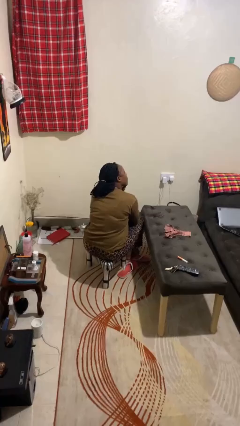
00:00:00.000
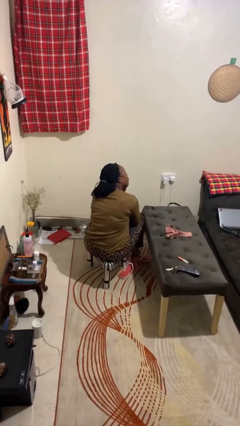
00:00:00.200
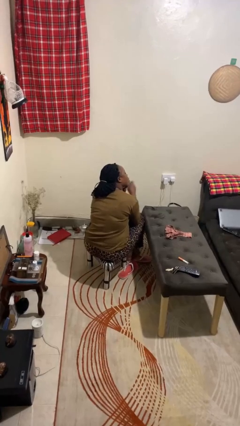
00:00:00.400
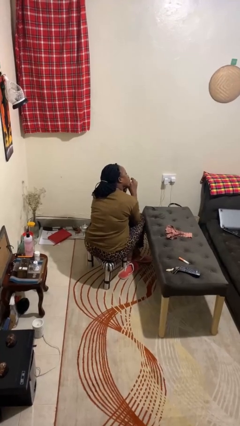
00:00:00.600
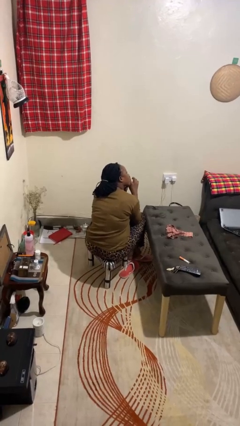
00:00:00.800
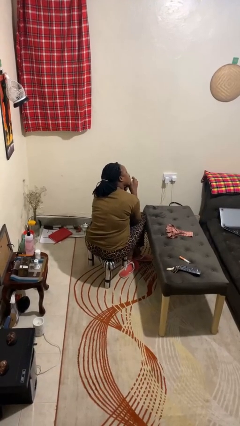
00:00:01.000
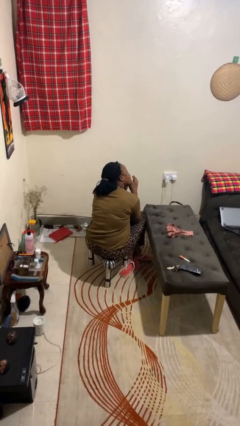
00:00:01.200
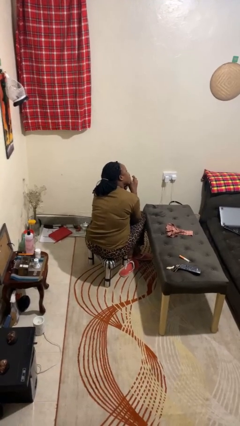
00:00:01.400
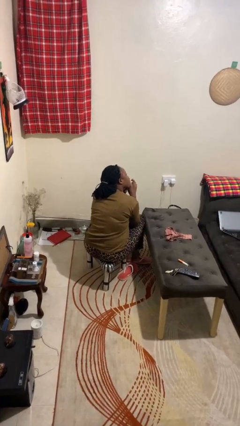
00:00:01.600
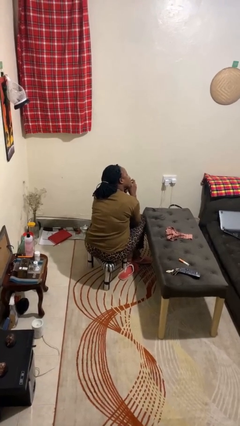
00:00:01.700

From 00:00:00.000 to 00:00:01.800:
person gestures be quiet

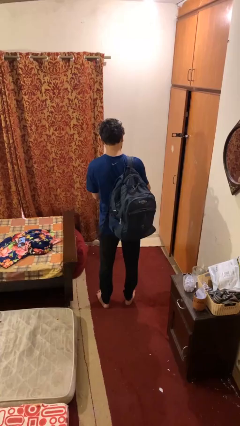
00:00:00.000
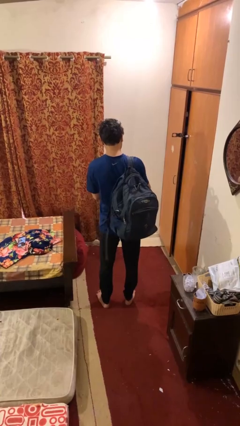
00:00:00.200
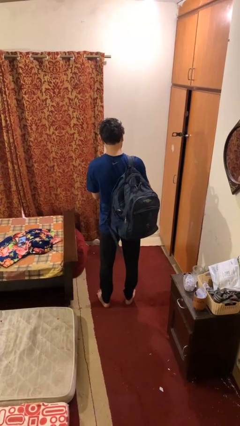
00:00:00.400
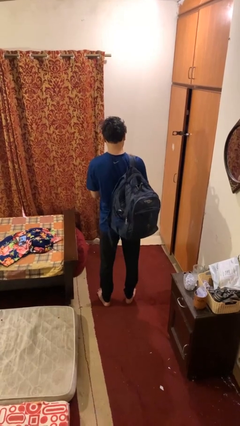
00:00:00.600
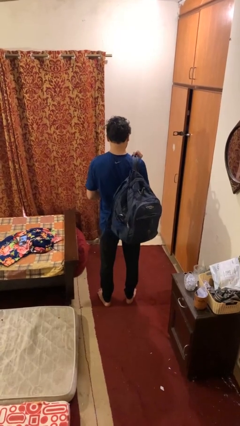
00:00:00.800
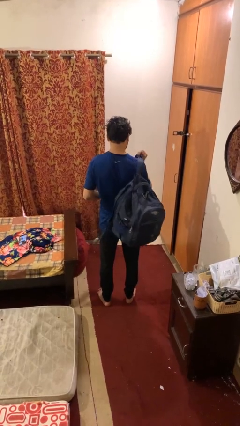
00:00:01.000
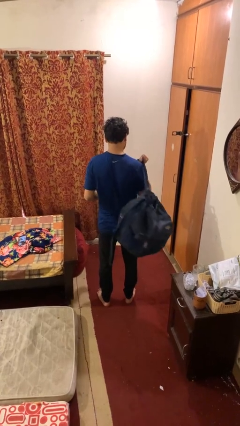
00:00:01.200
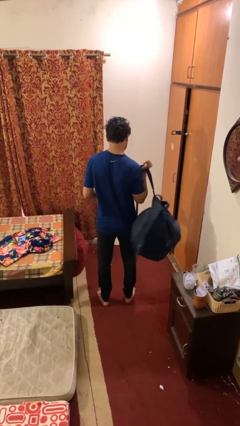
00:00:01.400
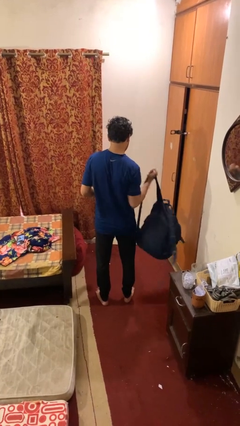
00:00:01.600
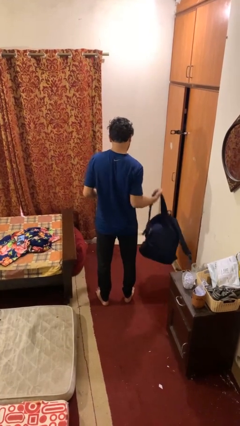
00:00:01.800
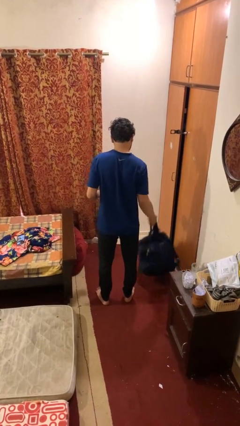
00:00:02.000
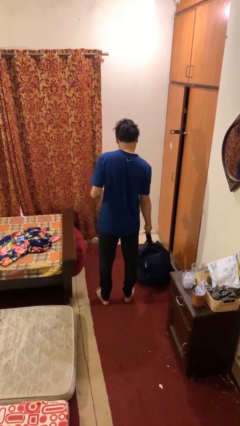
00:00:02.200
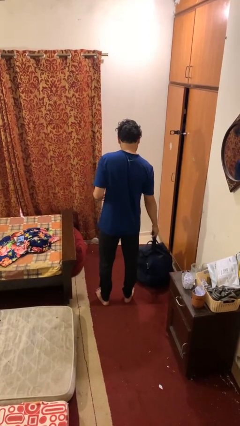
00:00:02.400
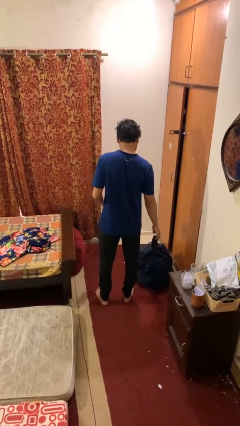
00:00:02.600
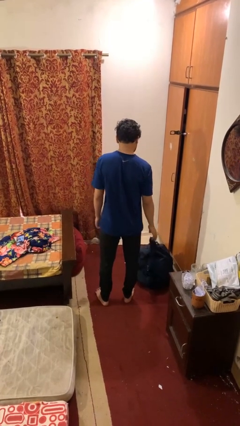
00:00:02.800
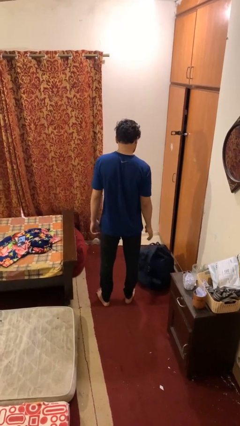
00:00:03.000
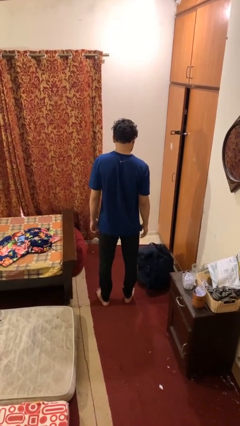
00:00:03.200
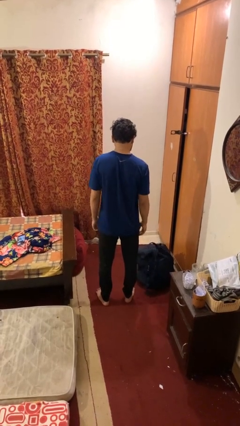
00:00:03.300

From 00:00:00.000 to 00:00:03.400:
person takes off backpack

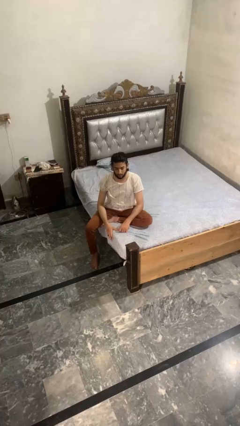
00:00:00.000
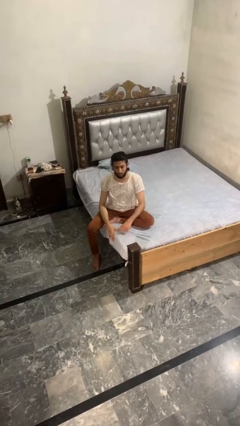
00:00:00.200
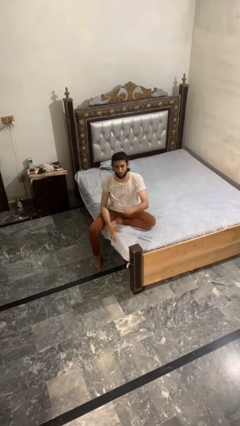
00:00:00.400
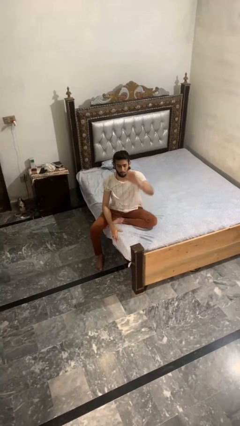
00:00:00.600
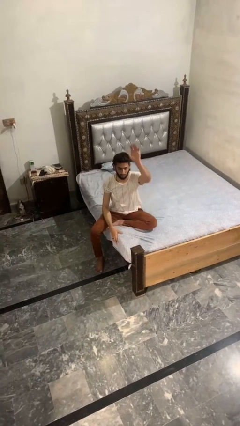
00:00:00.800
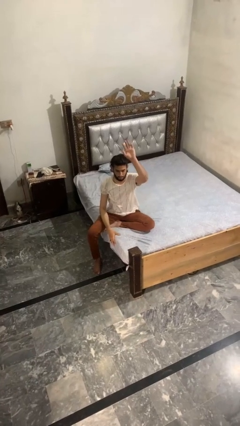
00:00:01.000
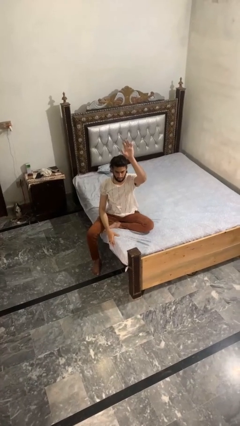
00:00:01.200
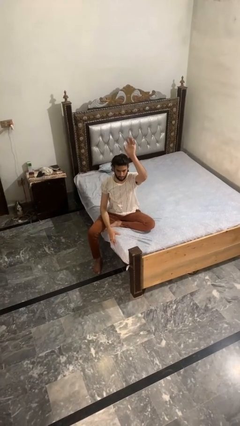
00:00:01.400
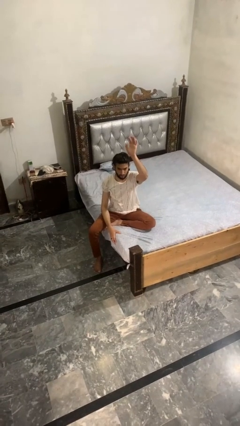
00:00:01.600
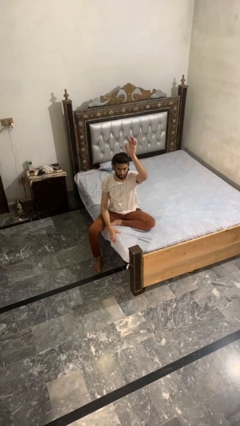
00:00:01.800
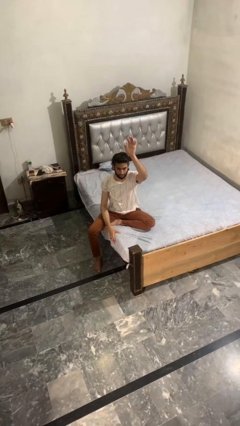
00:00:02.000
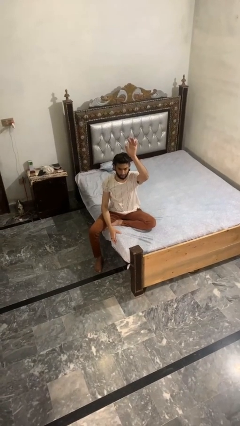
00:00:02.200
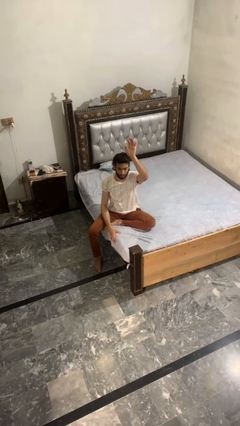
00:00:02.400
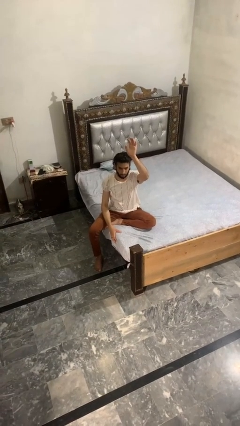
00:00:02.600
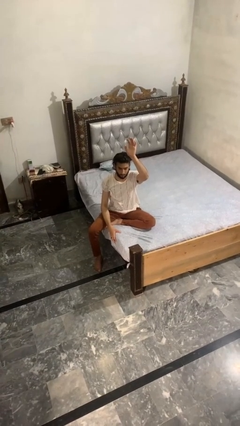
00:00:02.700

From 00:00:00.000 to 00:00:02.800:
person gestures raise hand

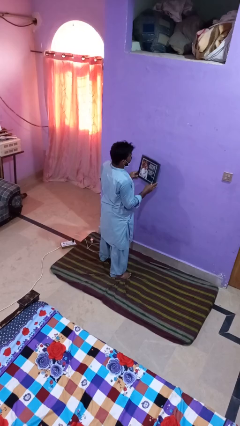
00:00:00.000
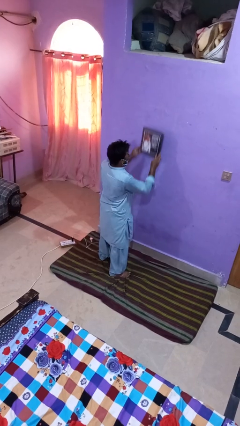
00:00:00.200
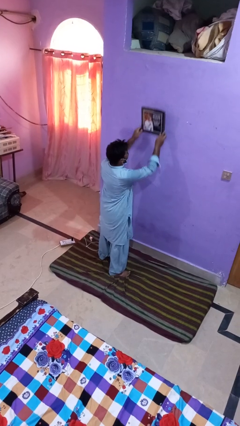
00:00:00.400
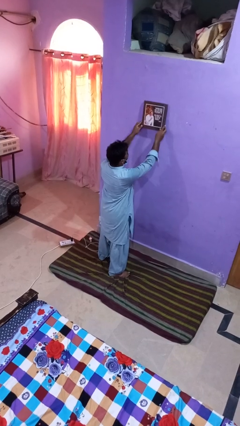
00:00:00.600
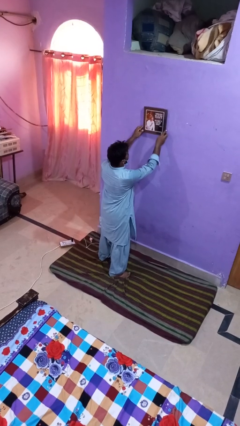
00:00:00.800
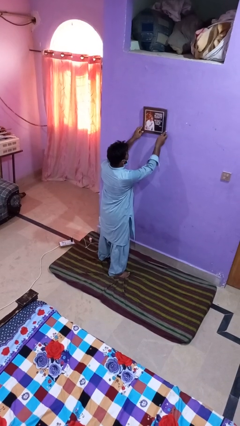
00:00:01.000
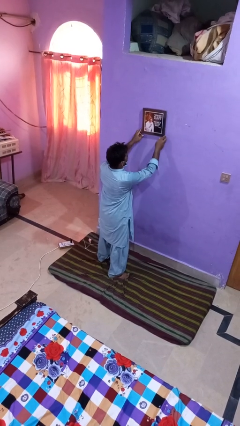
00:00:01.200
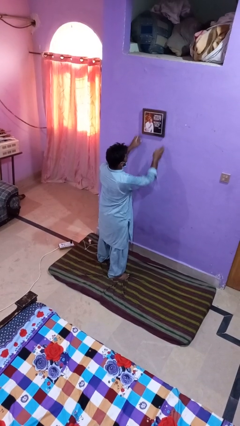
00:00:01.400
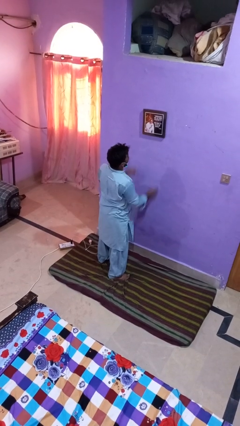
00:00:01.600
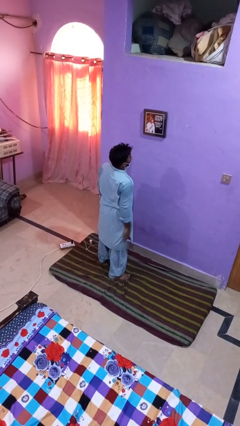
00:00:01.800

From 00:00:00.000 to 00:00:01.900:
person puts up picture frame

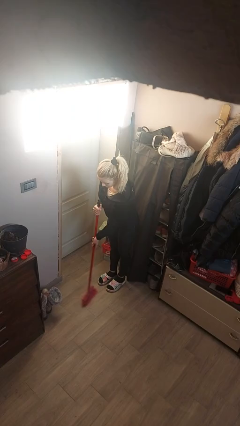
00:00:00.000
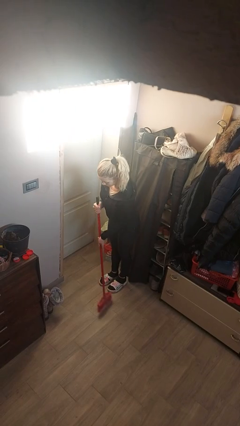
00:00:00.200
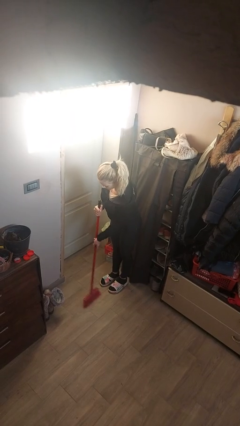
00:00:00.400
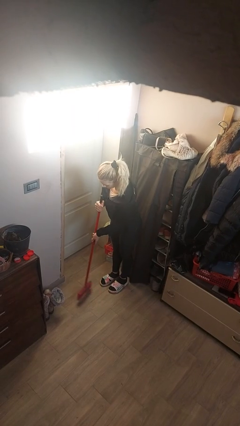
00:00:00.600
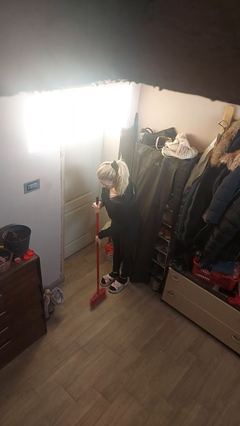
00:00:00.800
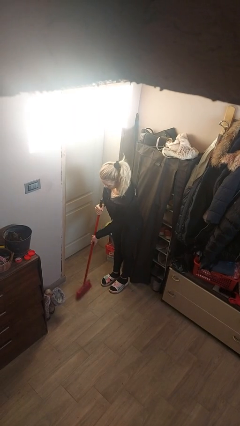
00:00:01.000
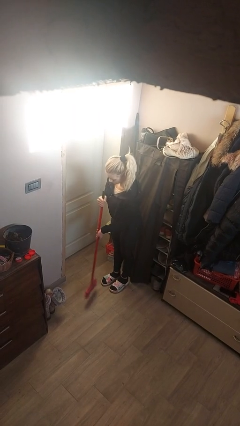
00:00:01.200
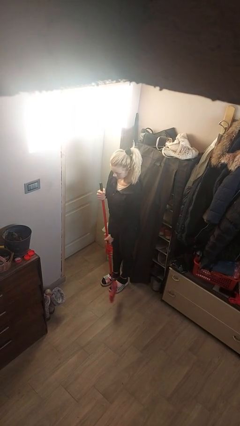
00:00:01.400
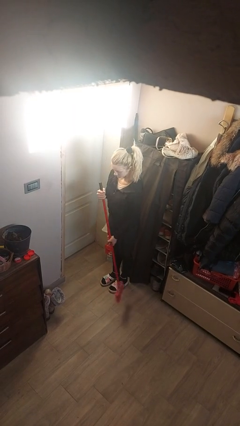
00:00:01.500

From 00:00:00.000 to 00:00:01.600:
person sweeps floor

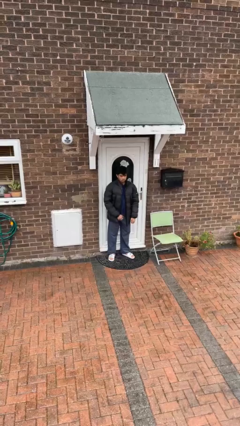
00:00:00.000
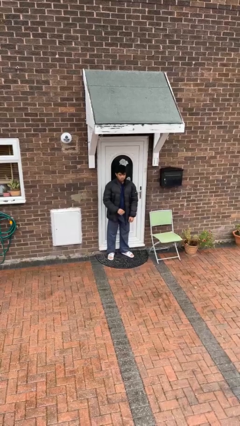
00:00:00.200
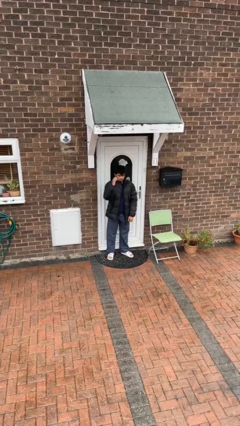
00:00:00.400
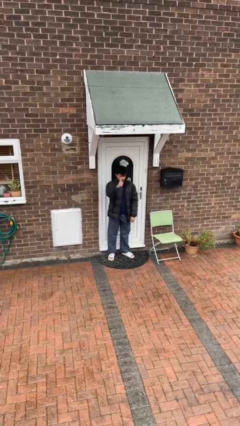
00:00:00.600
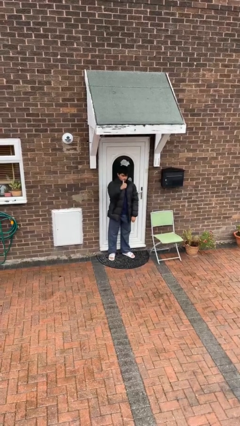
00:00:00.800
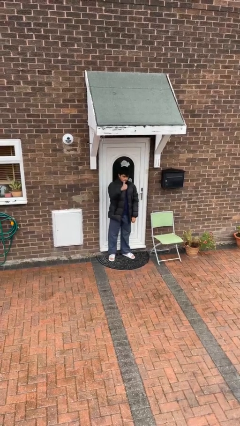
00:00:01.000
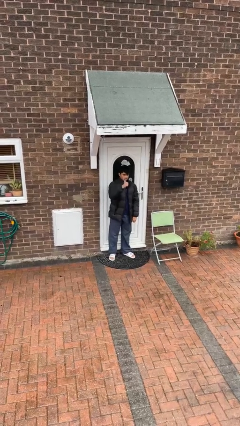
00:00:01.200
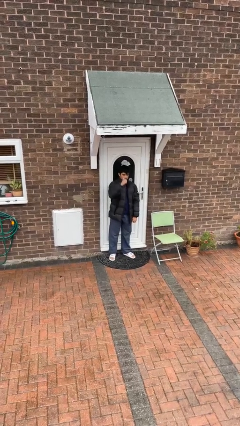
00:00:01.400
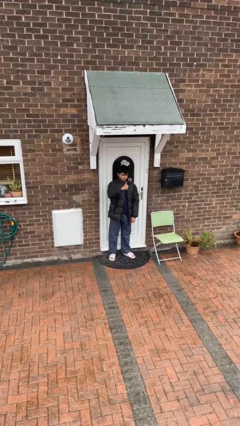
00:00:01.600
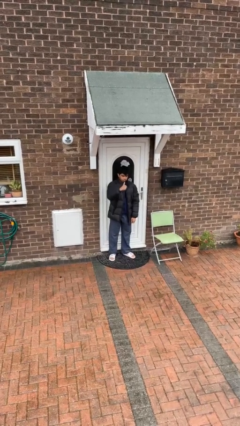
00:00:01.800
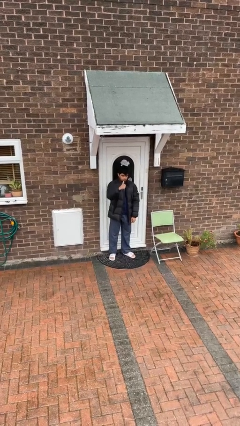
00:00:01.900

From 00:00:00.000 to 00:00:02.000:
person gestures thumbs up

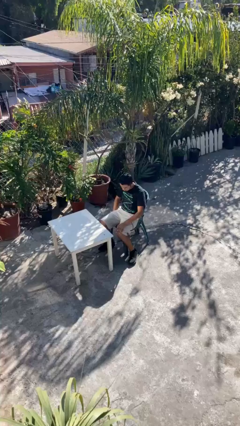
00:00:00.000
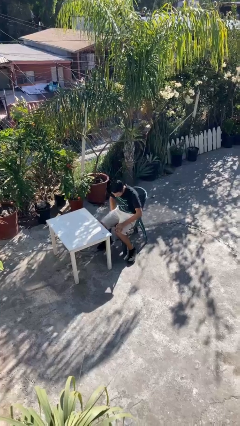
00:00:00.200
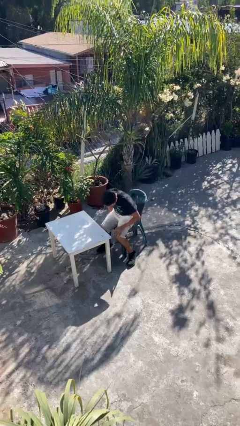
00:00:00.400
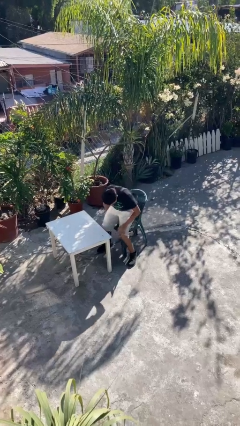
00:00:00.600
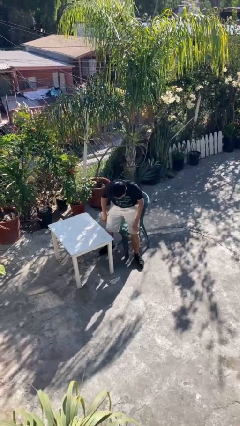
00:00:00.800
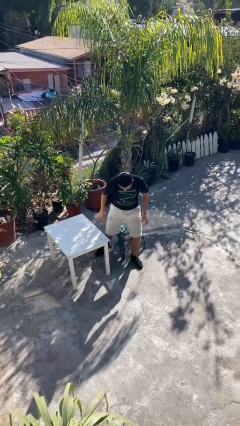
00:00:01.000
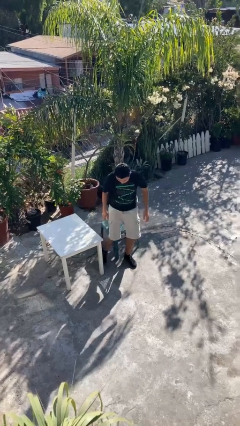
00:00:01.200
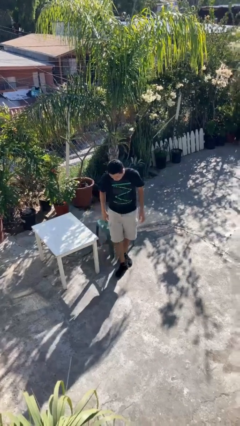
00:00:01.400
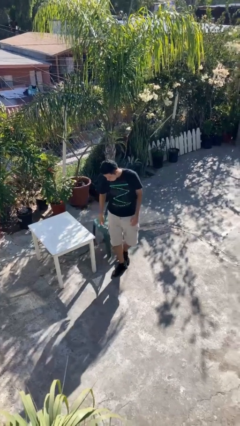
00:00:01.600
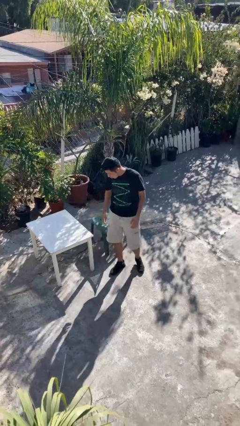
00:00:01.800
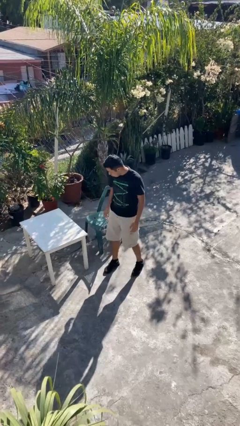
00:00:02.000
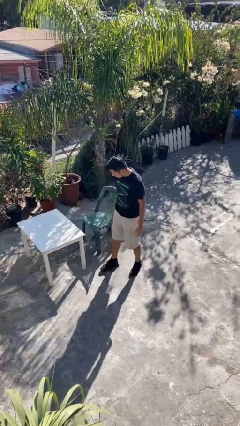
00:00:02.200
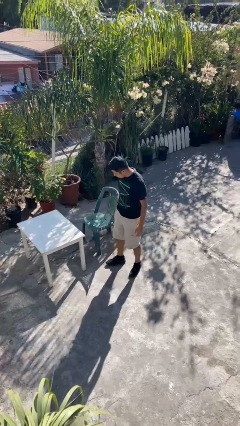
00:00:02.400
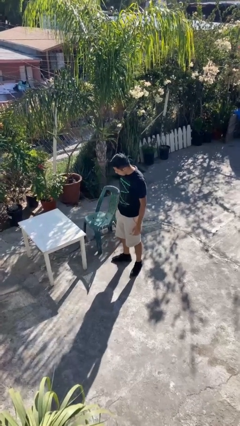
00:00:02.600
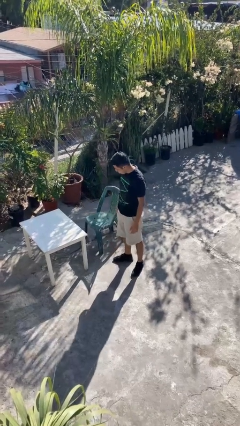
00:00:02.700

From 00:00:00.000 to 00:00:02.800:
person stands up

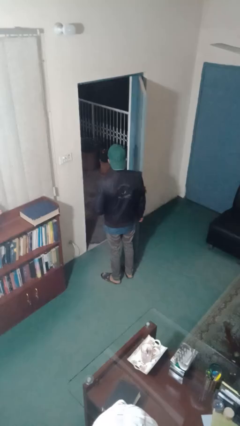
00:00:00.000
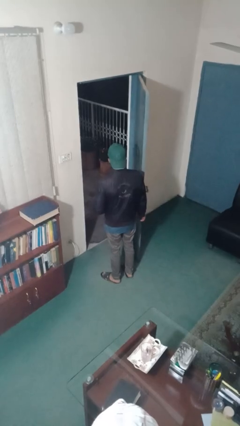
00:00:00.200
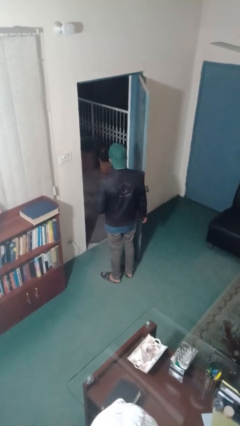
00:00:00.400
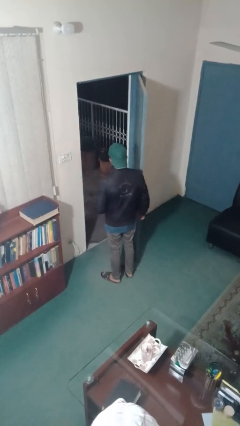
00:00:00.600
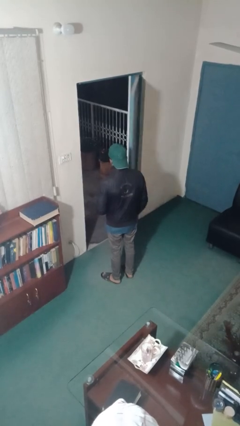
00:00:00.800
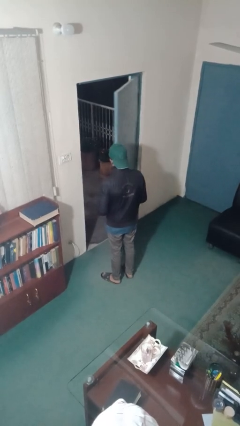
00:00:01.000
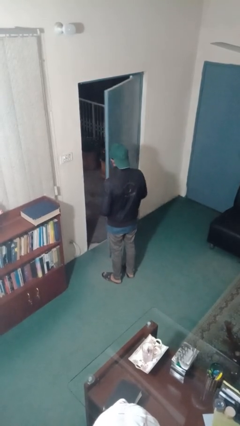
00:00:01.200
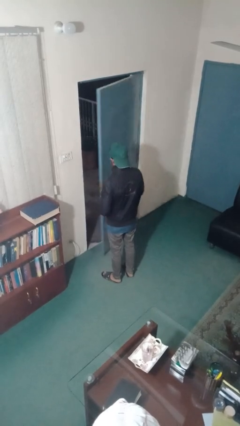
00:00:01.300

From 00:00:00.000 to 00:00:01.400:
person closes facility door
